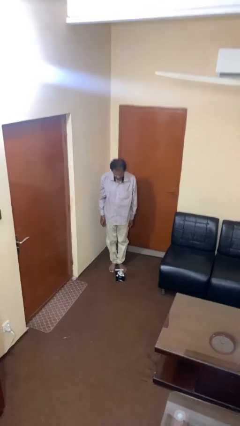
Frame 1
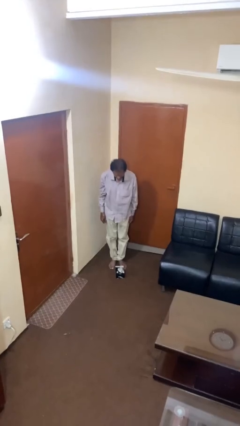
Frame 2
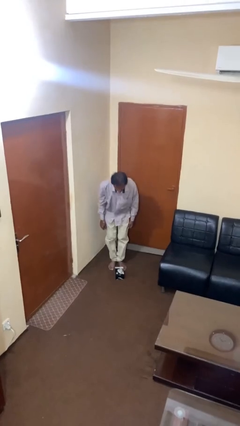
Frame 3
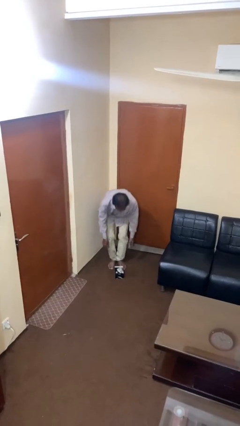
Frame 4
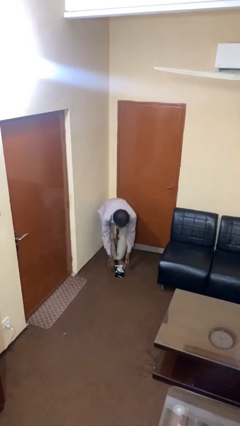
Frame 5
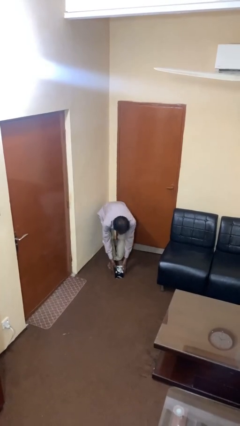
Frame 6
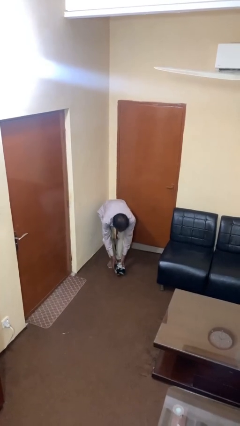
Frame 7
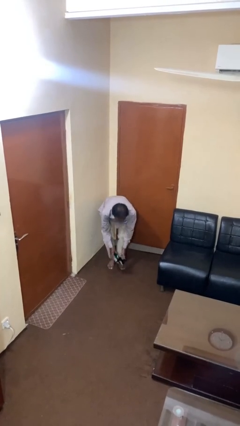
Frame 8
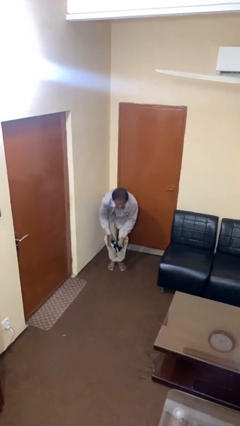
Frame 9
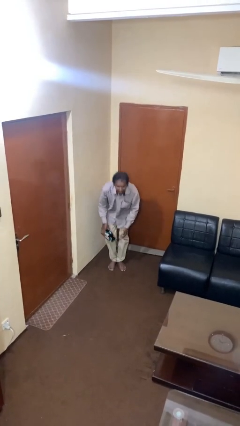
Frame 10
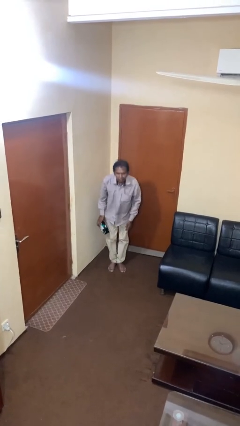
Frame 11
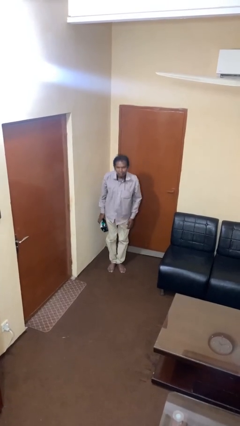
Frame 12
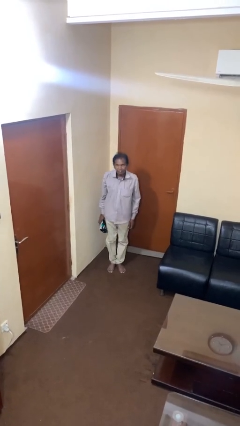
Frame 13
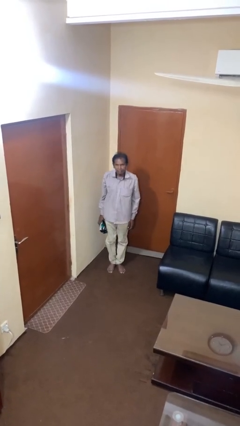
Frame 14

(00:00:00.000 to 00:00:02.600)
person picks up object from floor

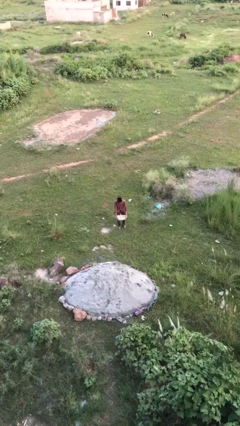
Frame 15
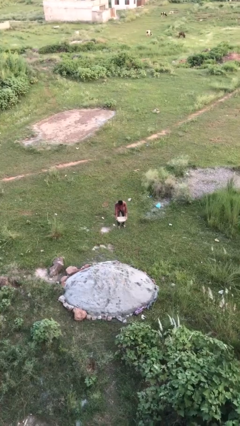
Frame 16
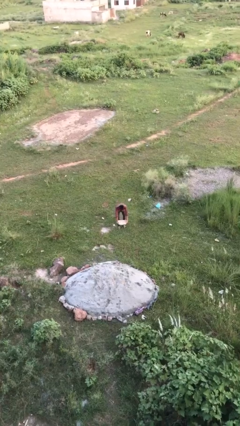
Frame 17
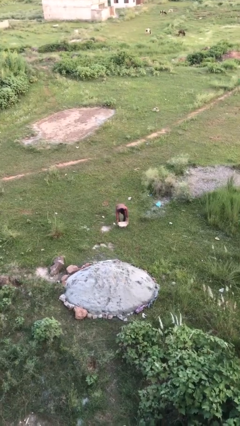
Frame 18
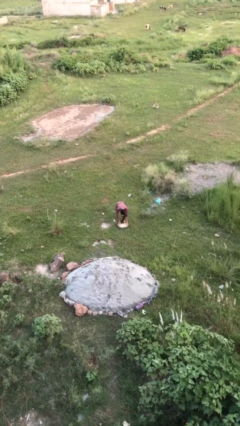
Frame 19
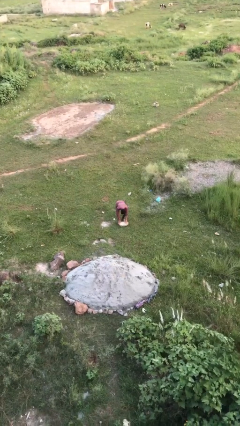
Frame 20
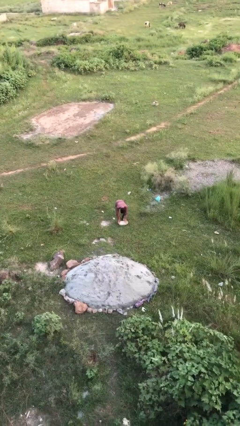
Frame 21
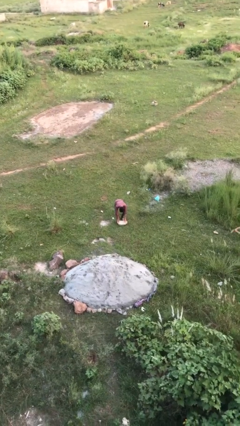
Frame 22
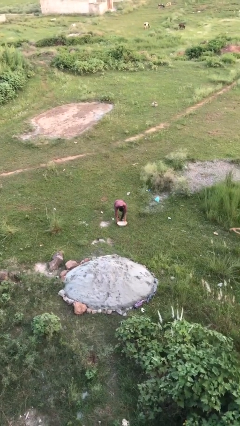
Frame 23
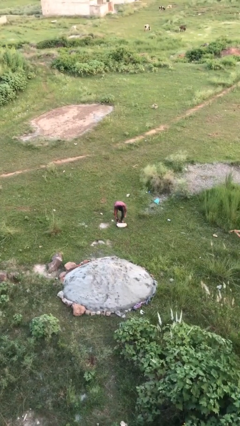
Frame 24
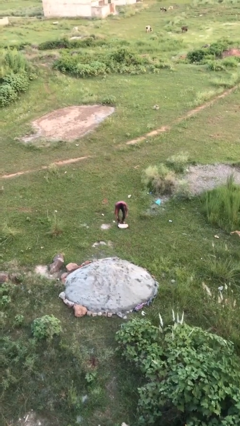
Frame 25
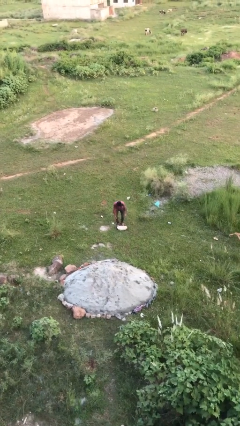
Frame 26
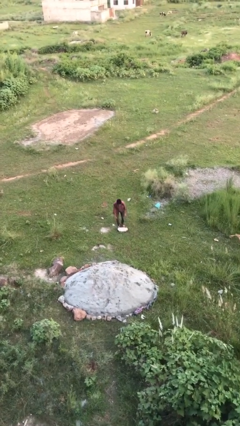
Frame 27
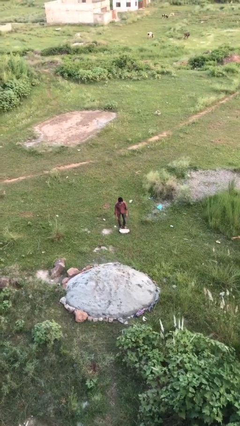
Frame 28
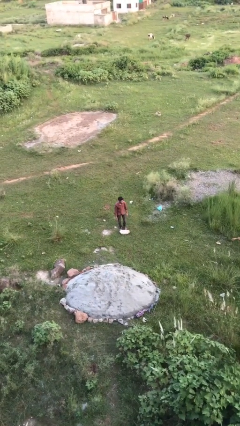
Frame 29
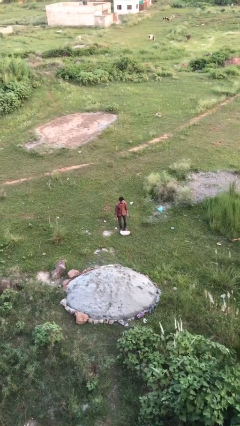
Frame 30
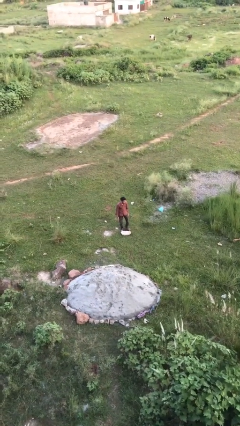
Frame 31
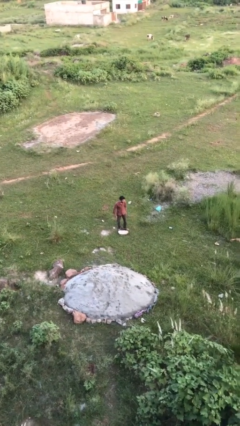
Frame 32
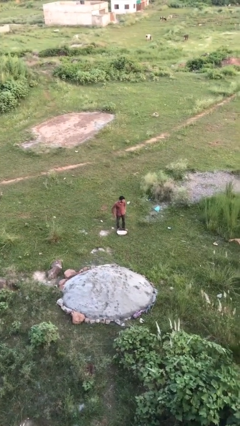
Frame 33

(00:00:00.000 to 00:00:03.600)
person puts down object on floor

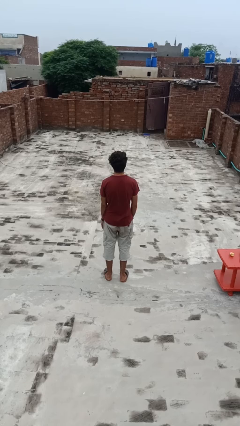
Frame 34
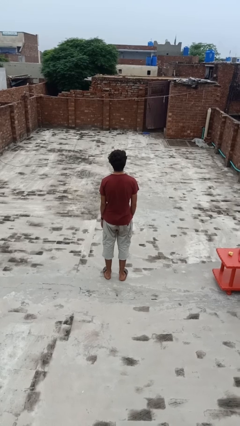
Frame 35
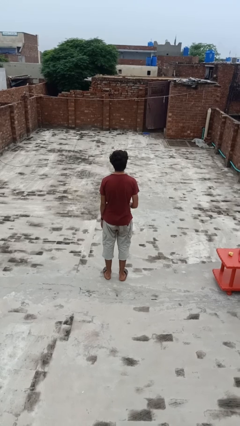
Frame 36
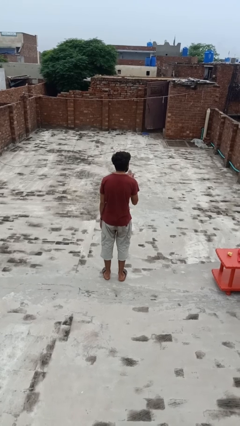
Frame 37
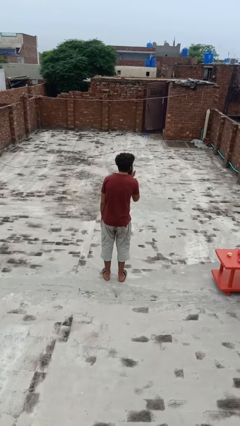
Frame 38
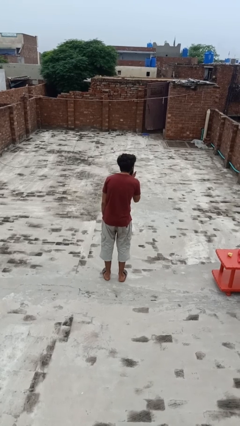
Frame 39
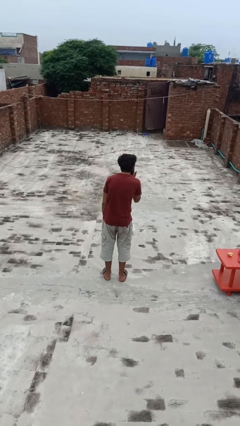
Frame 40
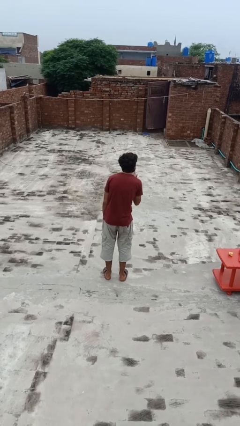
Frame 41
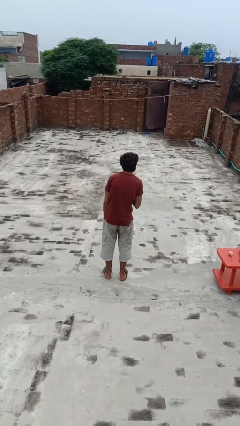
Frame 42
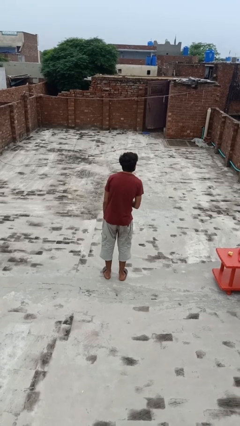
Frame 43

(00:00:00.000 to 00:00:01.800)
person gestures blow kiss

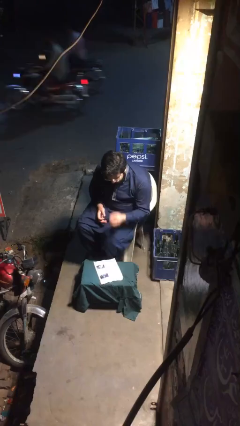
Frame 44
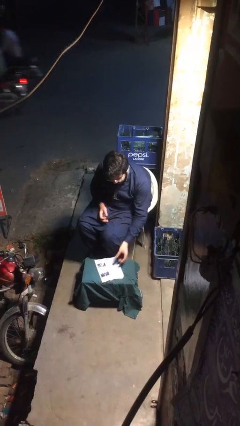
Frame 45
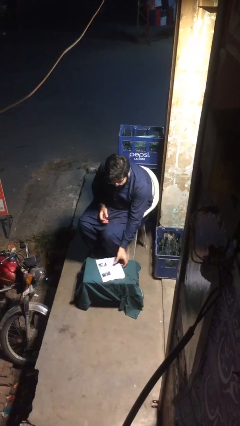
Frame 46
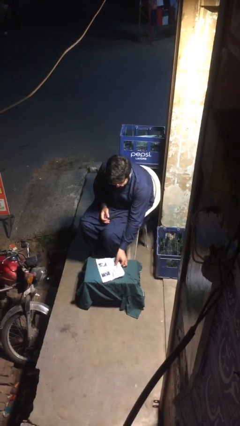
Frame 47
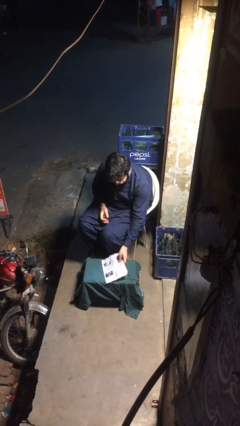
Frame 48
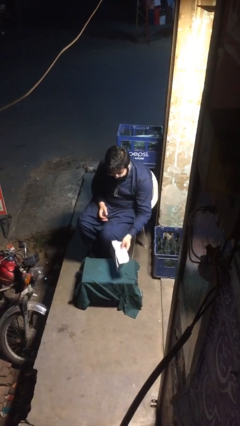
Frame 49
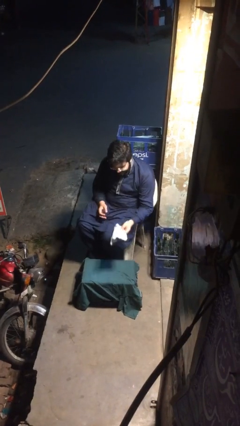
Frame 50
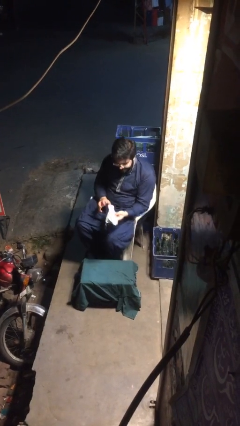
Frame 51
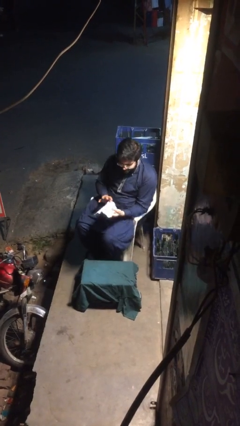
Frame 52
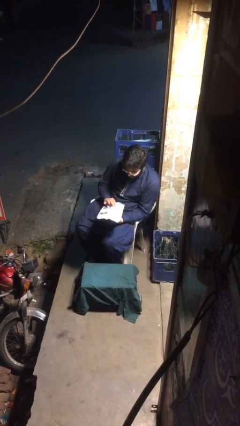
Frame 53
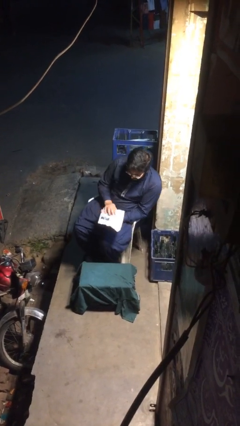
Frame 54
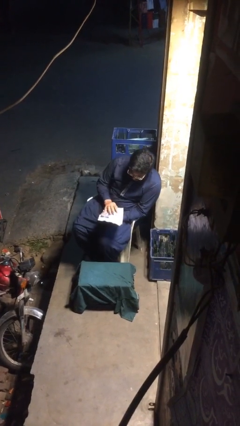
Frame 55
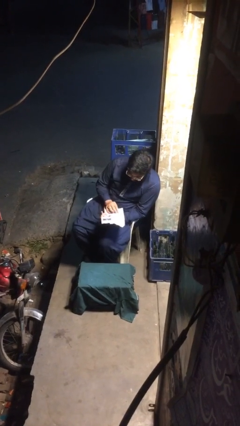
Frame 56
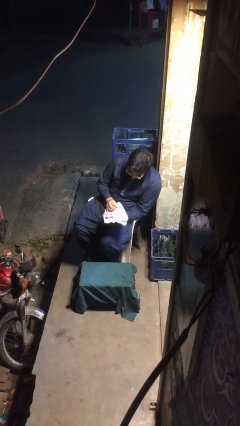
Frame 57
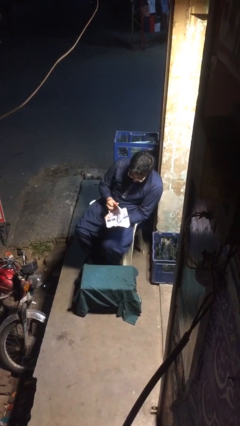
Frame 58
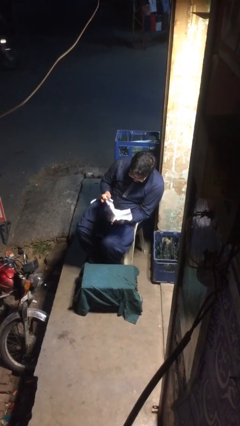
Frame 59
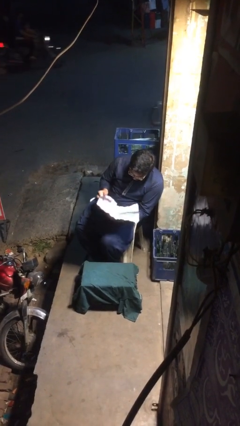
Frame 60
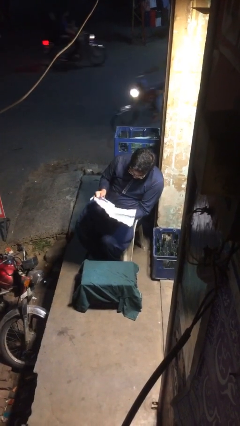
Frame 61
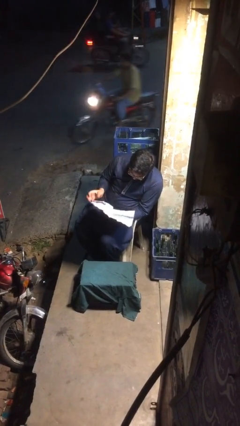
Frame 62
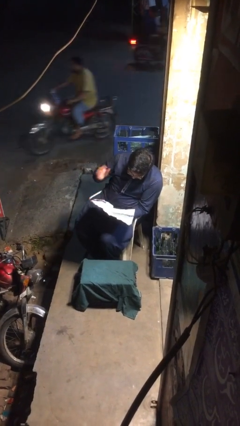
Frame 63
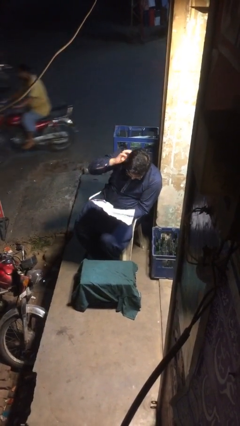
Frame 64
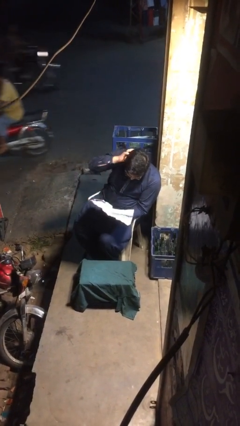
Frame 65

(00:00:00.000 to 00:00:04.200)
person picks up object from table

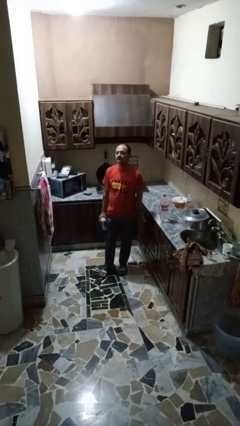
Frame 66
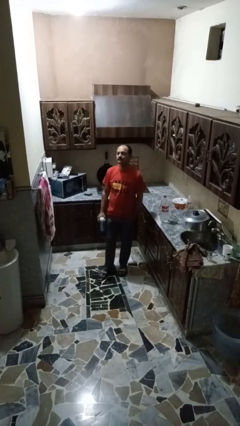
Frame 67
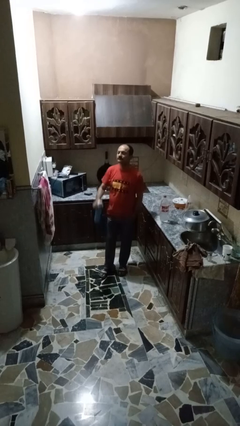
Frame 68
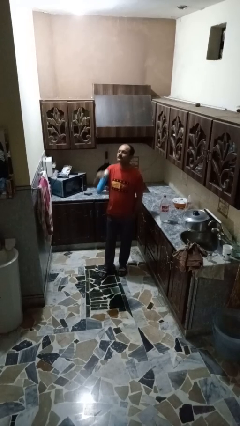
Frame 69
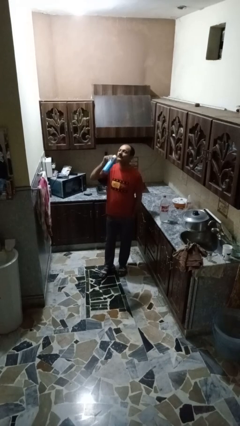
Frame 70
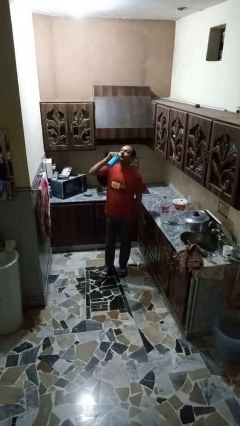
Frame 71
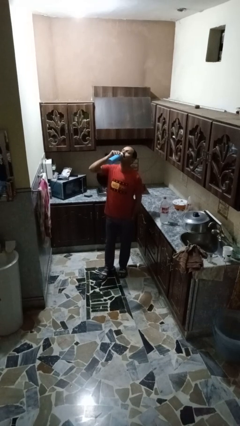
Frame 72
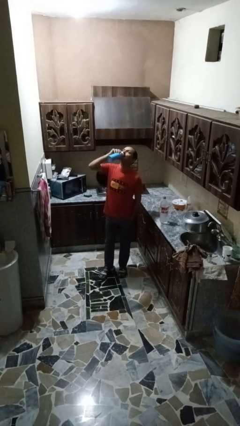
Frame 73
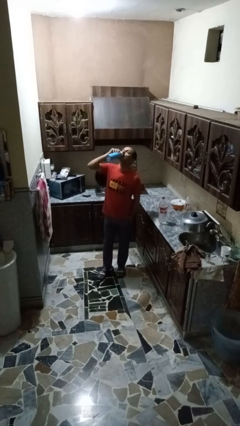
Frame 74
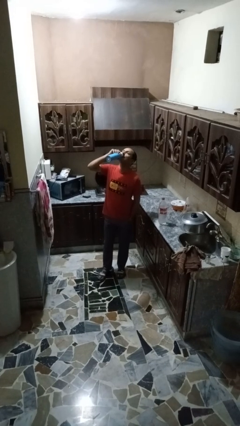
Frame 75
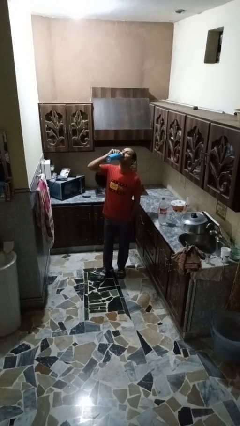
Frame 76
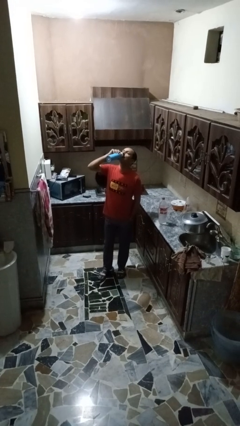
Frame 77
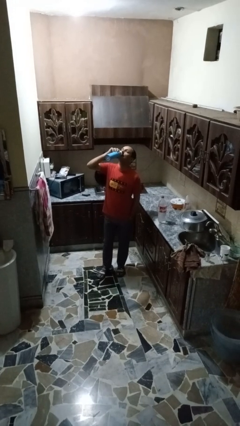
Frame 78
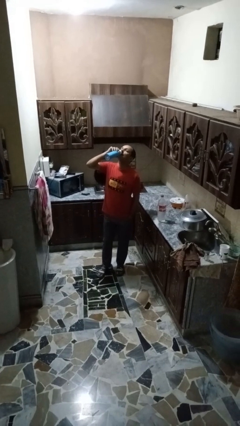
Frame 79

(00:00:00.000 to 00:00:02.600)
person drinks from bottle

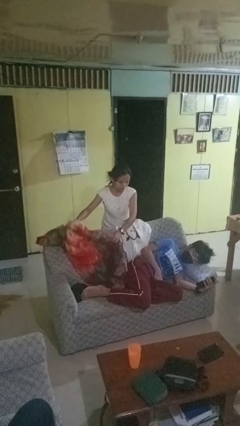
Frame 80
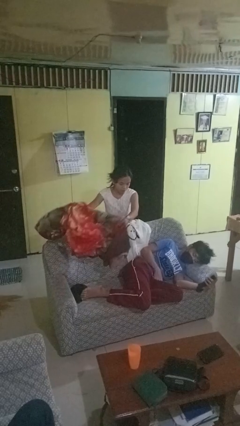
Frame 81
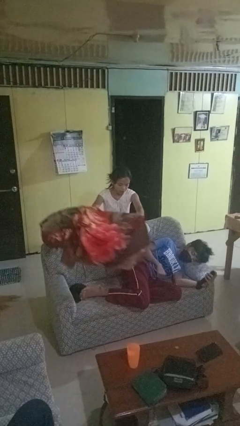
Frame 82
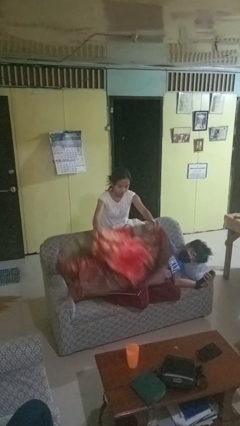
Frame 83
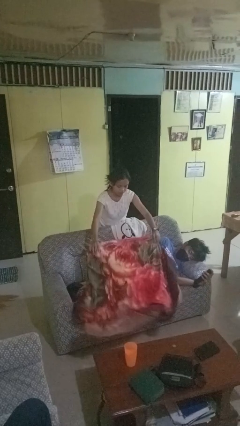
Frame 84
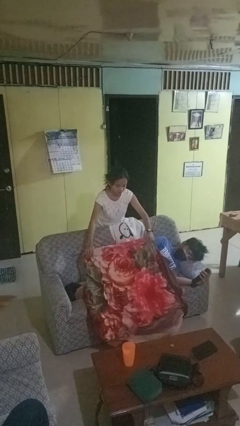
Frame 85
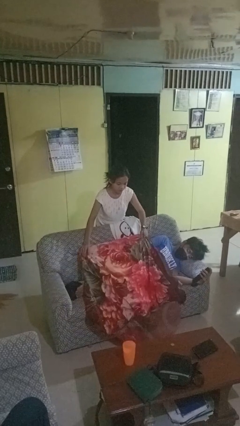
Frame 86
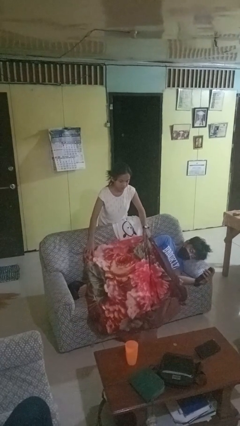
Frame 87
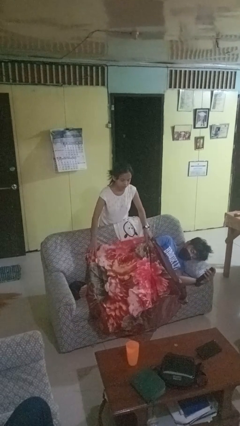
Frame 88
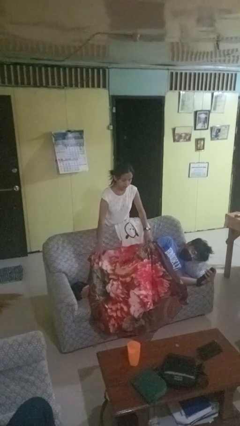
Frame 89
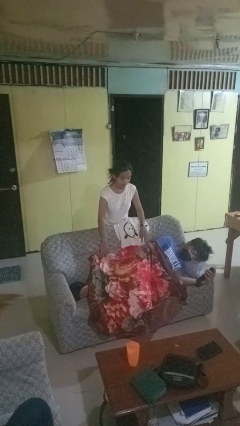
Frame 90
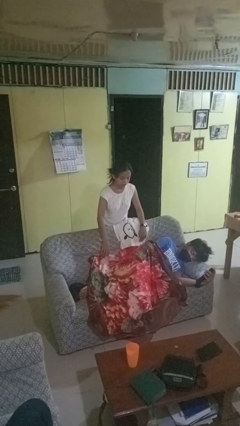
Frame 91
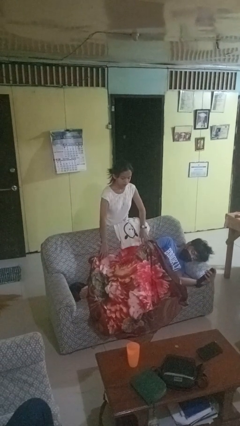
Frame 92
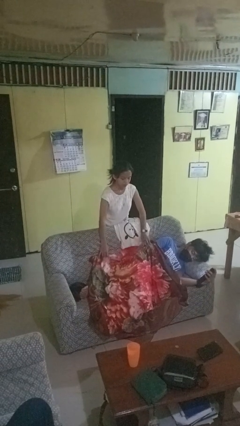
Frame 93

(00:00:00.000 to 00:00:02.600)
person covers friend with blanket
